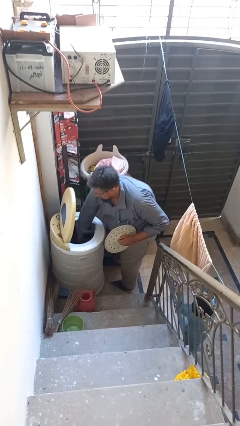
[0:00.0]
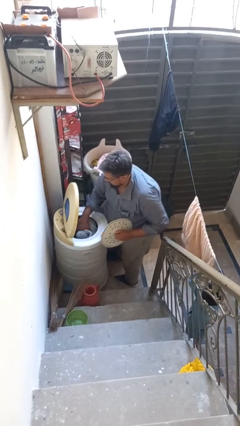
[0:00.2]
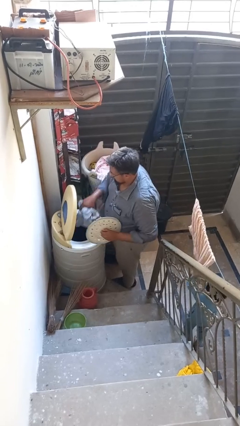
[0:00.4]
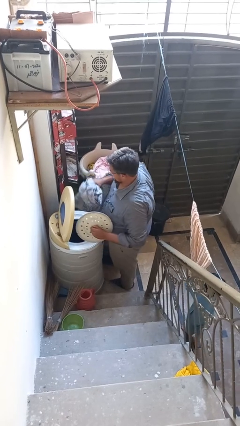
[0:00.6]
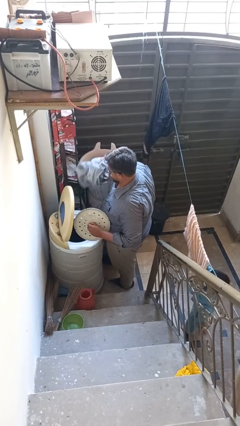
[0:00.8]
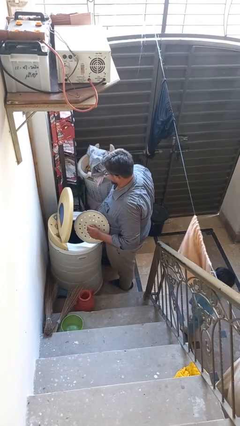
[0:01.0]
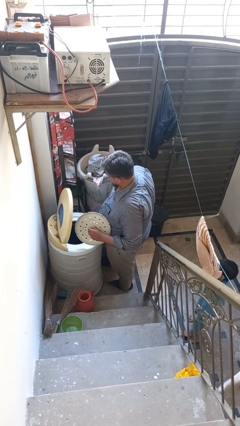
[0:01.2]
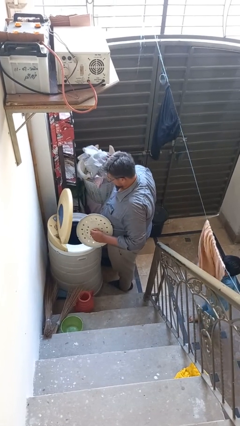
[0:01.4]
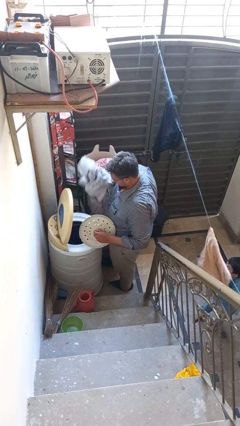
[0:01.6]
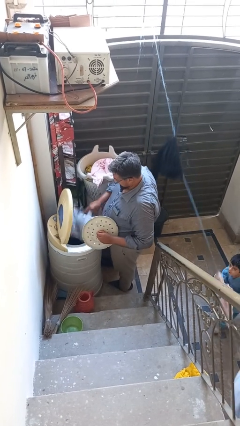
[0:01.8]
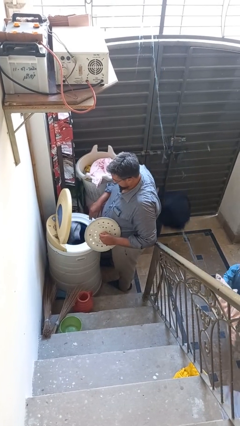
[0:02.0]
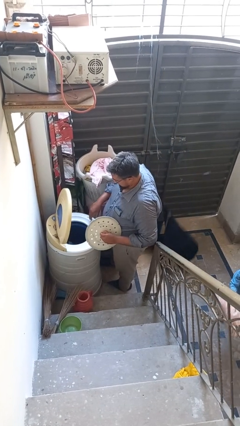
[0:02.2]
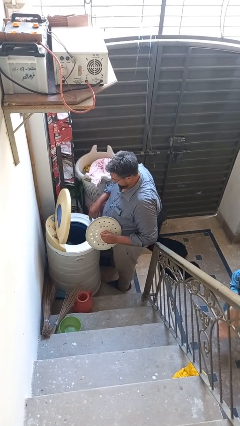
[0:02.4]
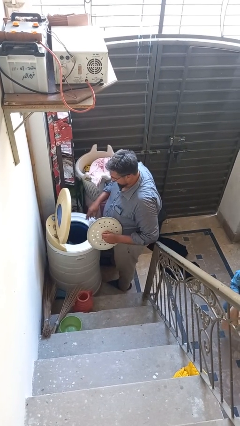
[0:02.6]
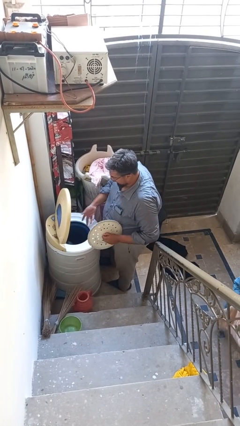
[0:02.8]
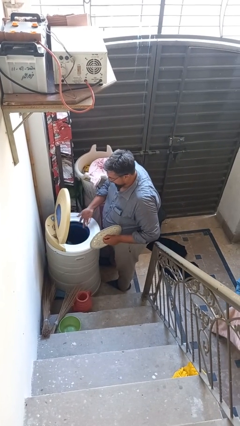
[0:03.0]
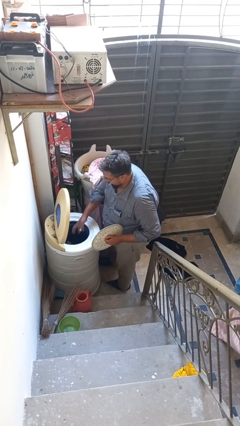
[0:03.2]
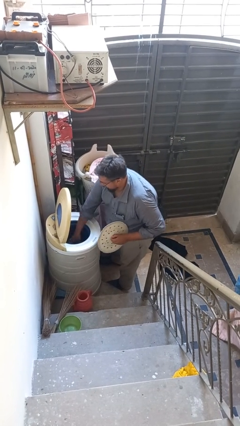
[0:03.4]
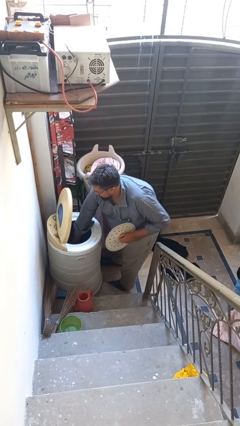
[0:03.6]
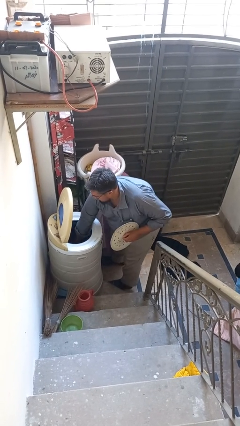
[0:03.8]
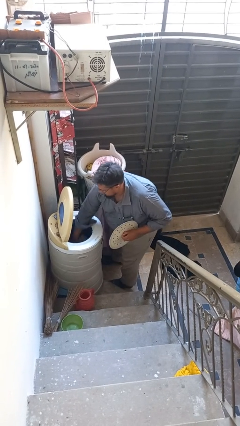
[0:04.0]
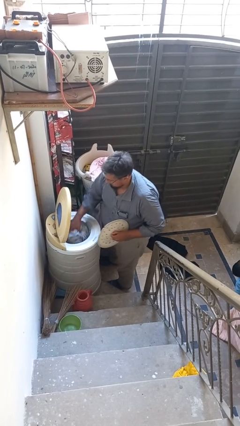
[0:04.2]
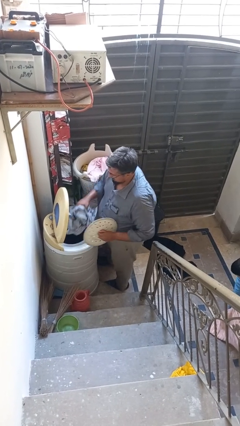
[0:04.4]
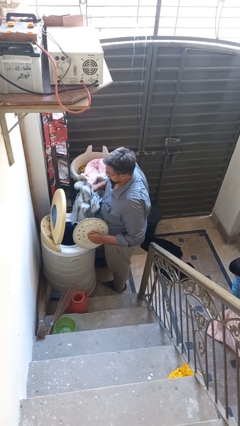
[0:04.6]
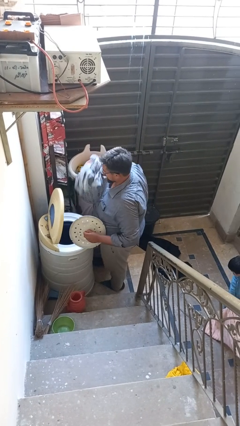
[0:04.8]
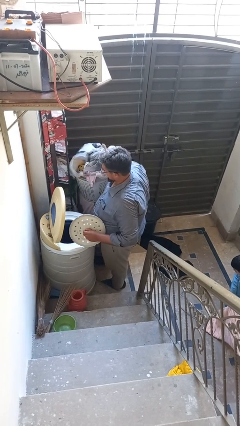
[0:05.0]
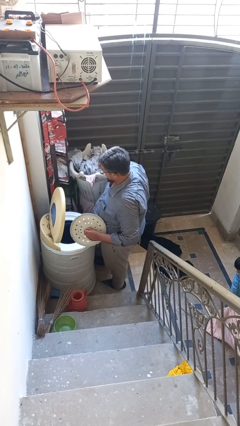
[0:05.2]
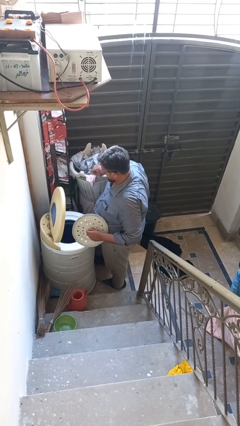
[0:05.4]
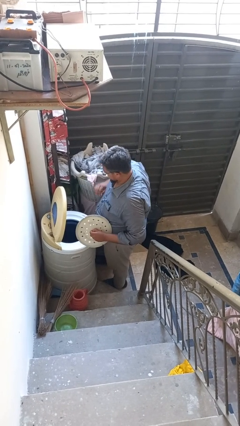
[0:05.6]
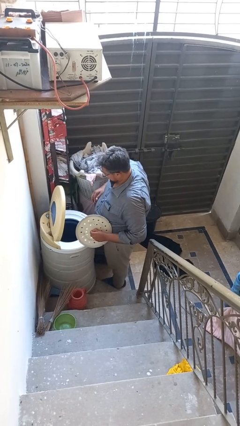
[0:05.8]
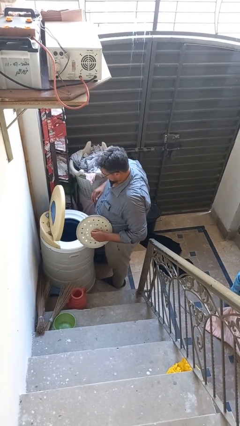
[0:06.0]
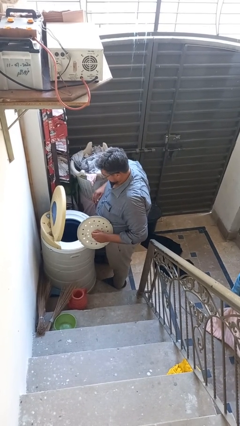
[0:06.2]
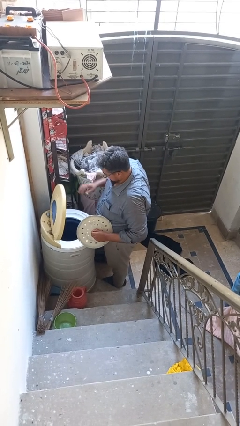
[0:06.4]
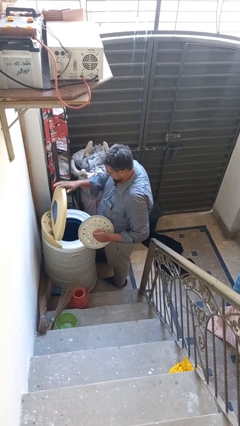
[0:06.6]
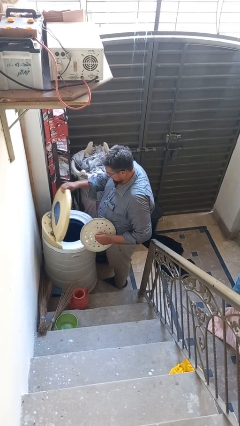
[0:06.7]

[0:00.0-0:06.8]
person unloads clotheswasher

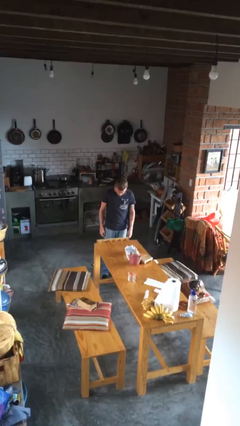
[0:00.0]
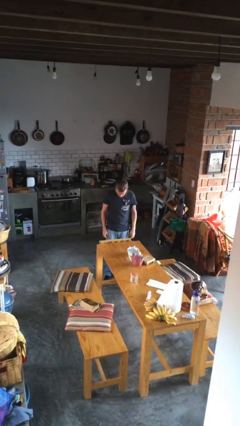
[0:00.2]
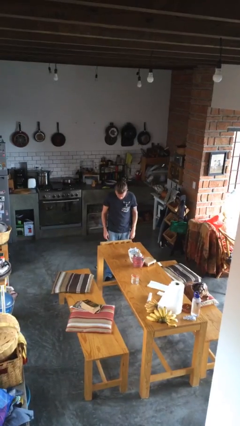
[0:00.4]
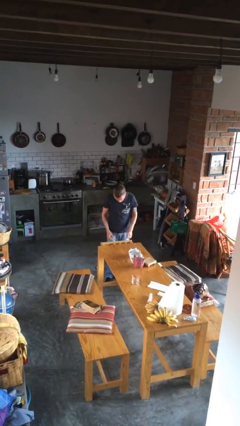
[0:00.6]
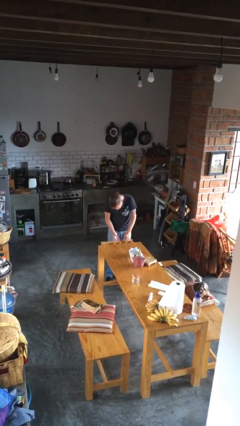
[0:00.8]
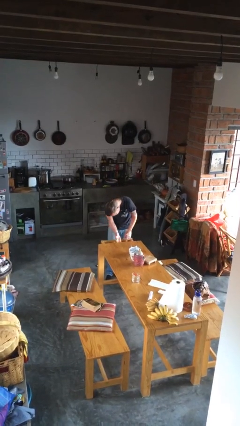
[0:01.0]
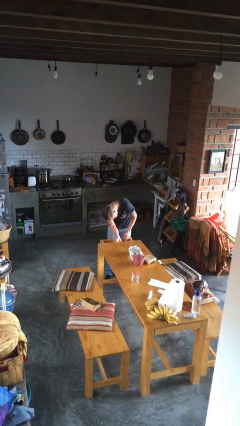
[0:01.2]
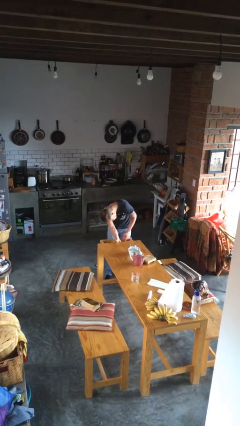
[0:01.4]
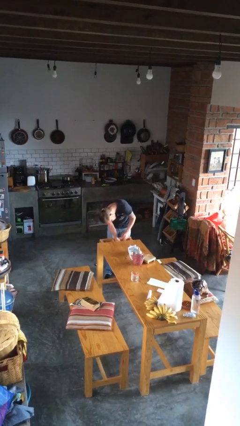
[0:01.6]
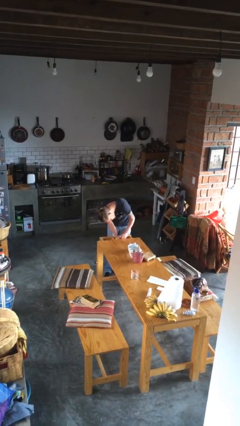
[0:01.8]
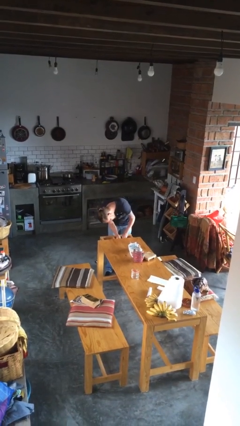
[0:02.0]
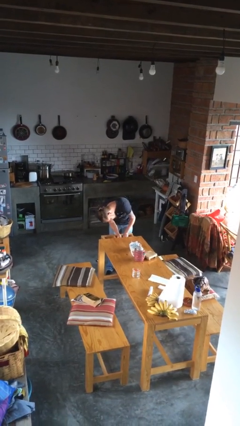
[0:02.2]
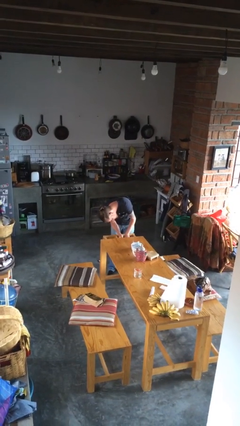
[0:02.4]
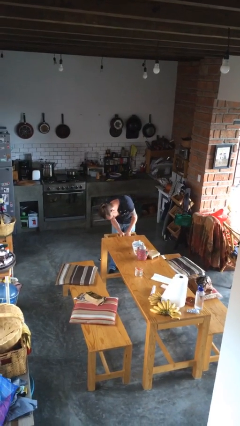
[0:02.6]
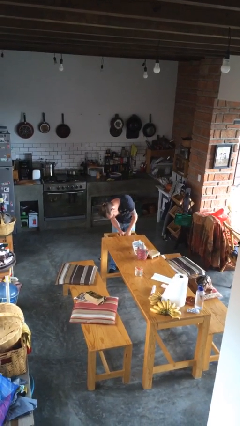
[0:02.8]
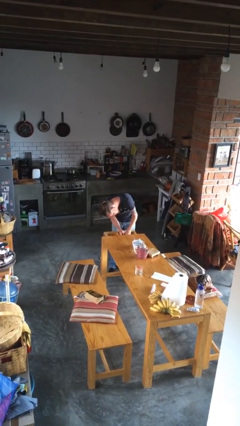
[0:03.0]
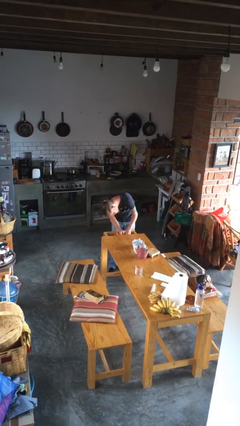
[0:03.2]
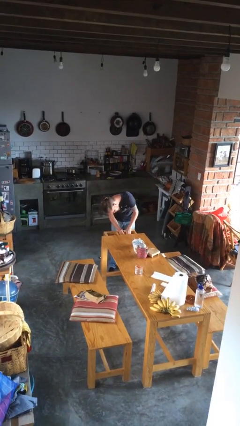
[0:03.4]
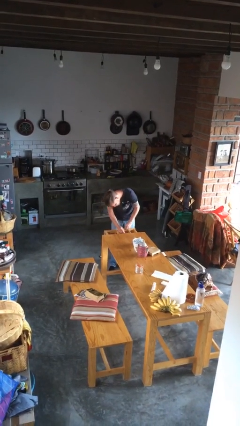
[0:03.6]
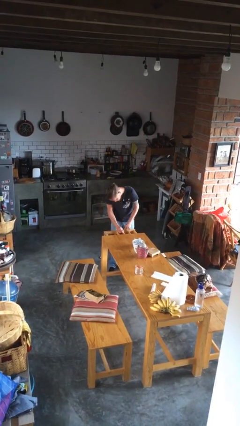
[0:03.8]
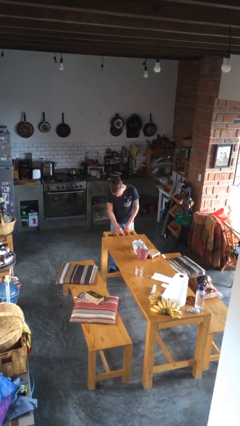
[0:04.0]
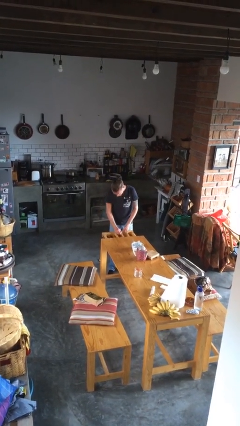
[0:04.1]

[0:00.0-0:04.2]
person searches in cabinet

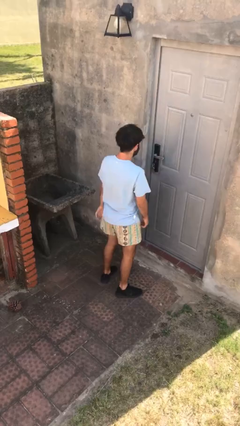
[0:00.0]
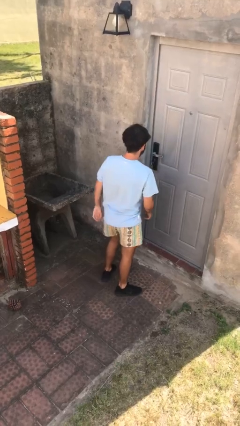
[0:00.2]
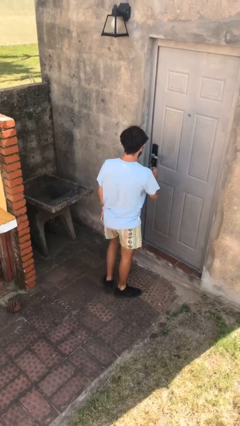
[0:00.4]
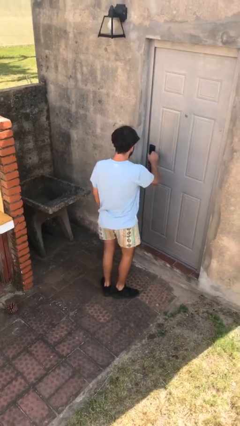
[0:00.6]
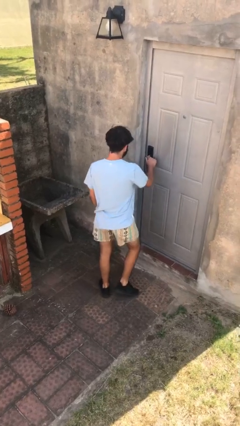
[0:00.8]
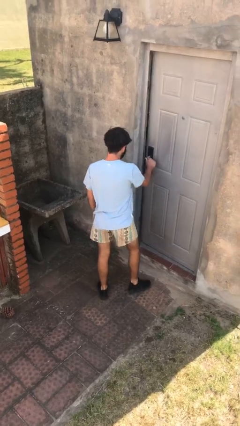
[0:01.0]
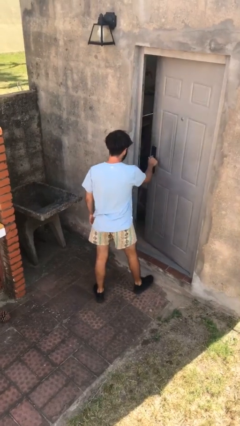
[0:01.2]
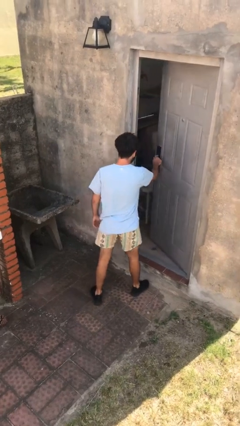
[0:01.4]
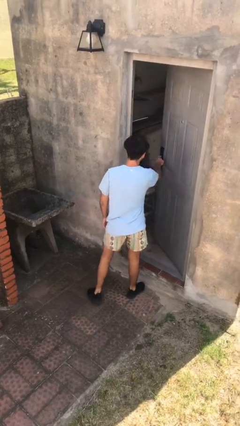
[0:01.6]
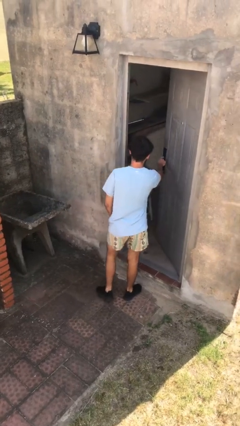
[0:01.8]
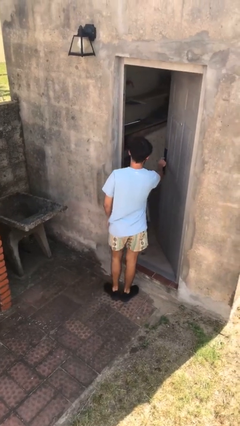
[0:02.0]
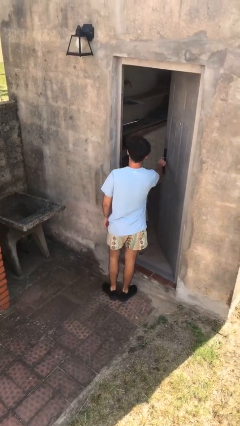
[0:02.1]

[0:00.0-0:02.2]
person opens facility door

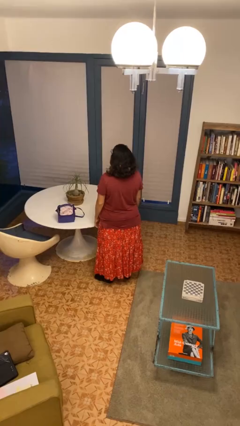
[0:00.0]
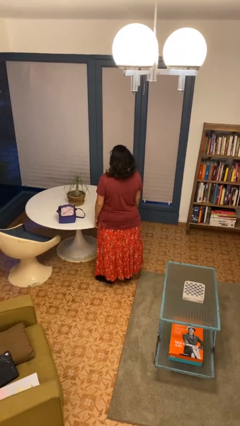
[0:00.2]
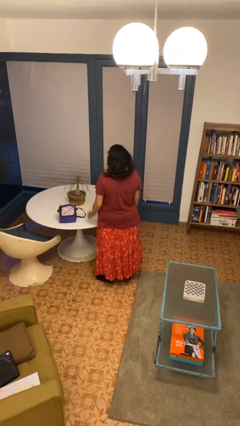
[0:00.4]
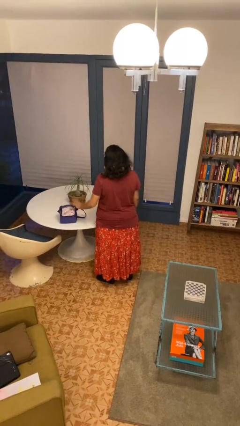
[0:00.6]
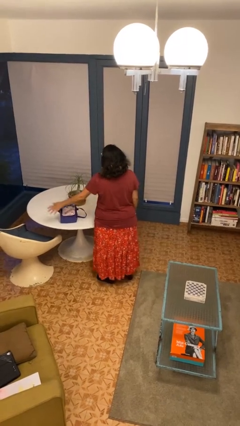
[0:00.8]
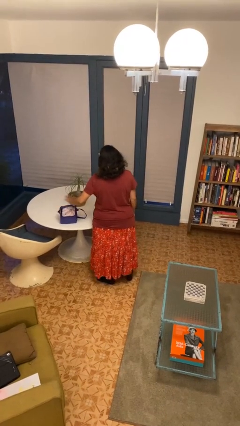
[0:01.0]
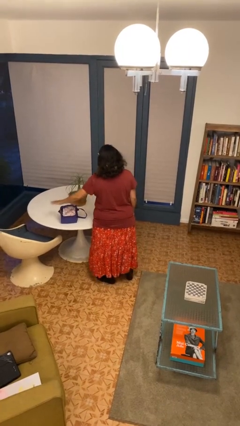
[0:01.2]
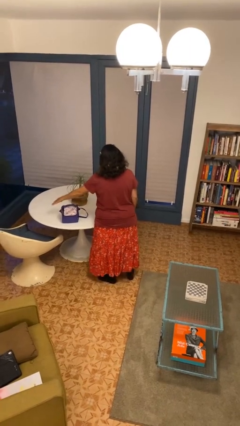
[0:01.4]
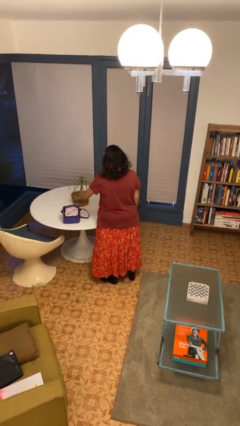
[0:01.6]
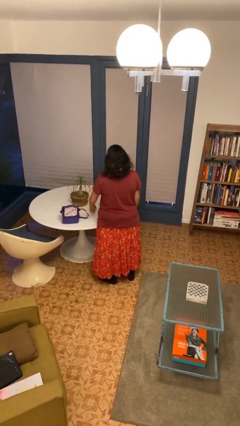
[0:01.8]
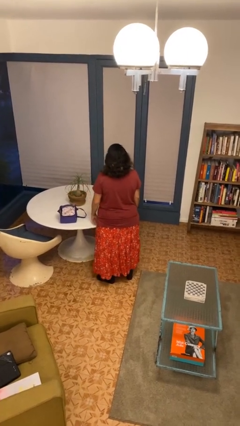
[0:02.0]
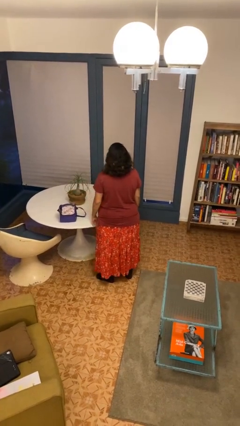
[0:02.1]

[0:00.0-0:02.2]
person waves hand over object

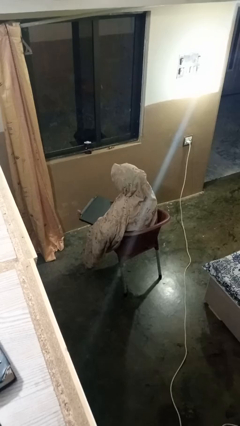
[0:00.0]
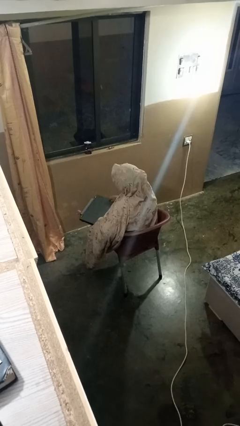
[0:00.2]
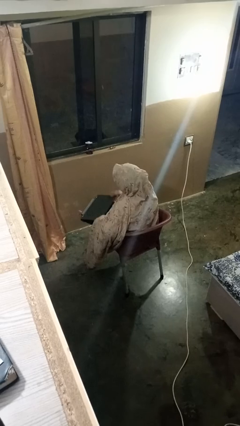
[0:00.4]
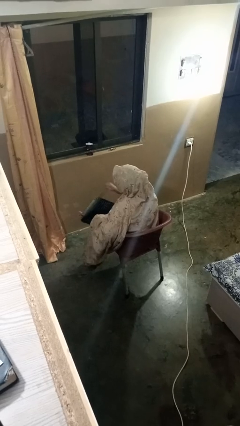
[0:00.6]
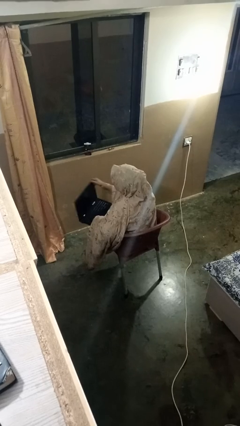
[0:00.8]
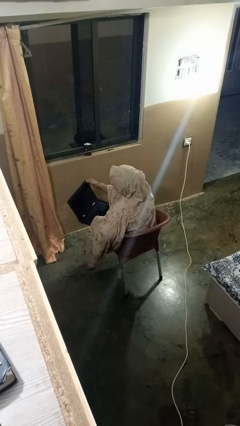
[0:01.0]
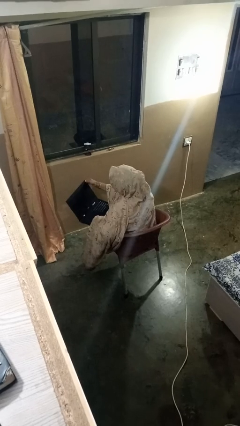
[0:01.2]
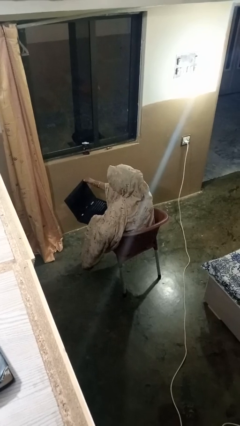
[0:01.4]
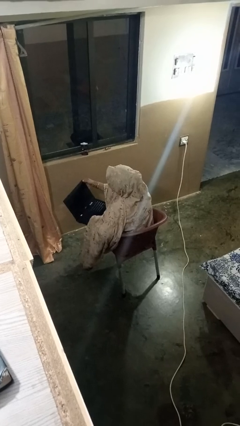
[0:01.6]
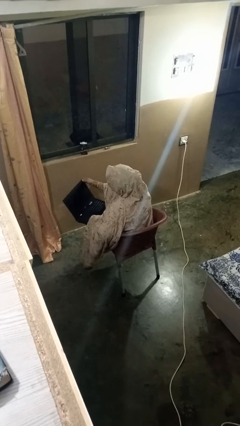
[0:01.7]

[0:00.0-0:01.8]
person opens laptop

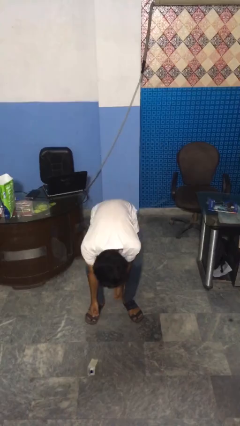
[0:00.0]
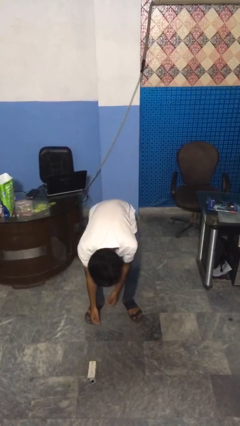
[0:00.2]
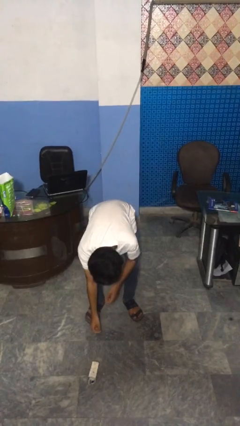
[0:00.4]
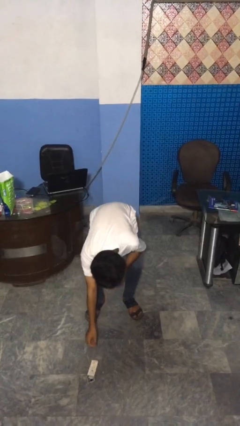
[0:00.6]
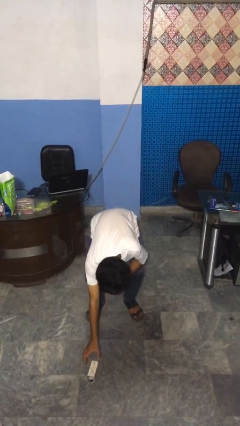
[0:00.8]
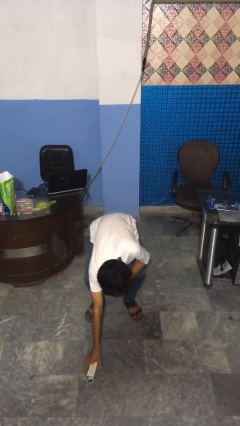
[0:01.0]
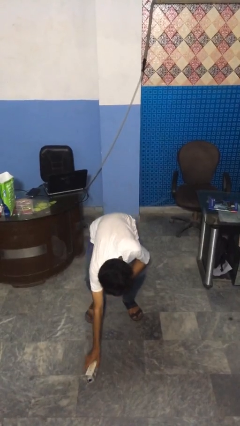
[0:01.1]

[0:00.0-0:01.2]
person catches dropped object
